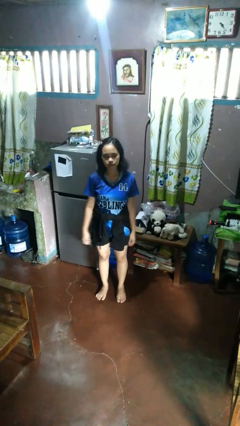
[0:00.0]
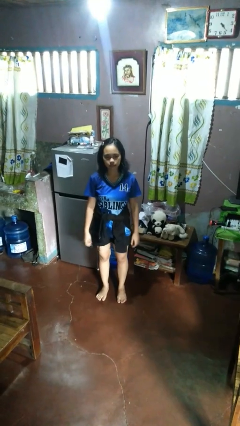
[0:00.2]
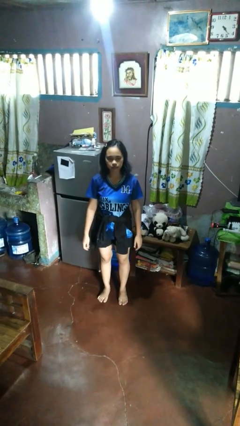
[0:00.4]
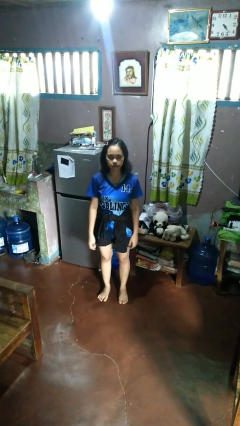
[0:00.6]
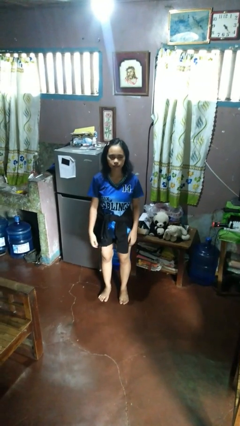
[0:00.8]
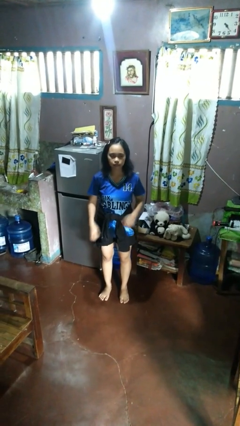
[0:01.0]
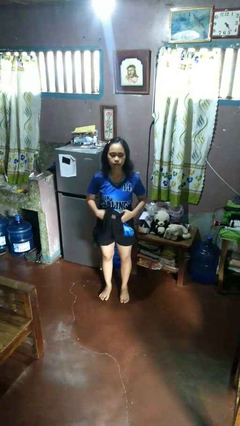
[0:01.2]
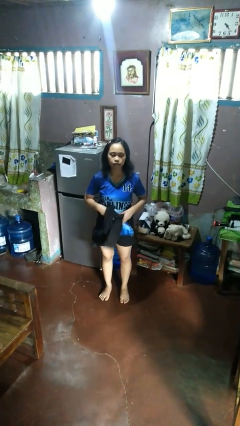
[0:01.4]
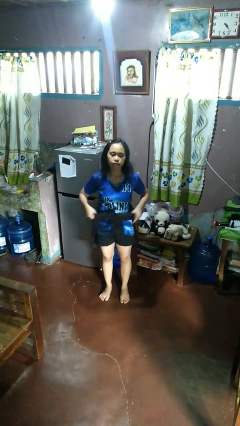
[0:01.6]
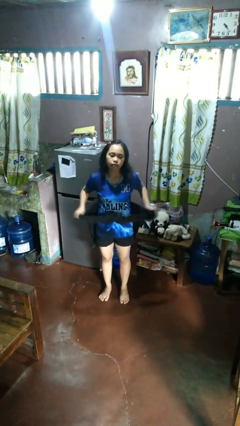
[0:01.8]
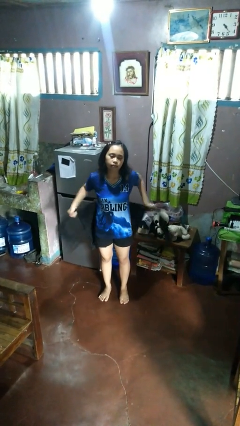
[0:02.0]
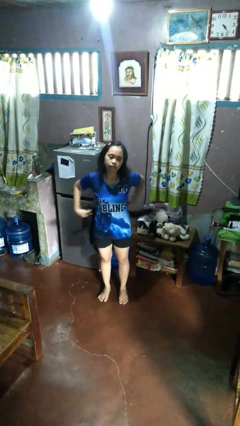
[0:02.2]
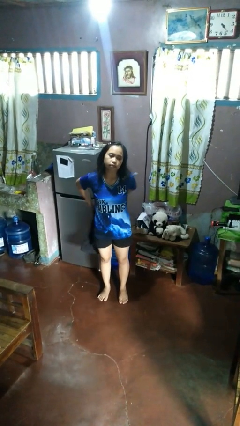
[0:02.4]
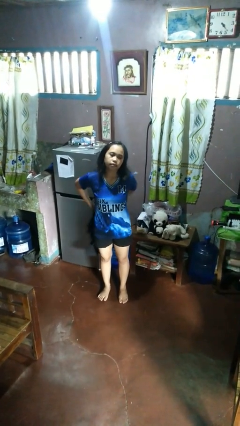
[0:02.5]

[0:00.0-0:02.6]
person unties jacket around waist

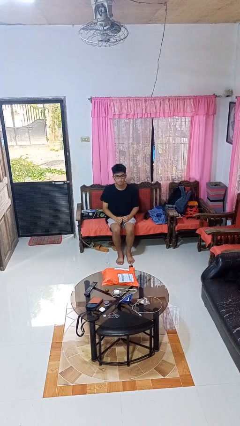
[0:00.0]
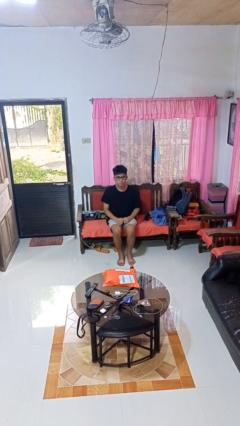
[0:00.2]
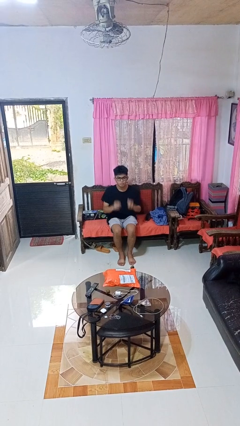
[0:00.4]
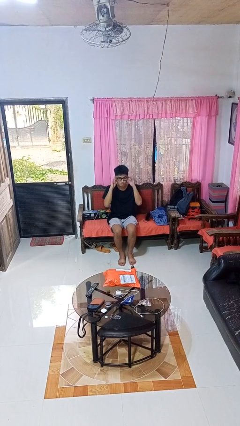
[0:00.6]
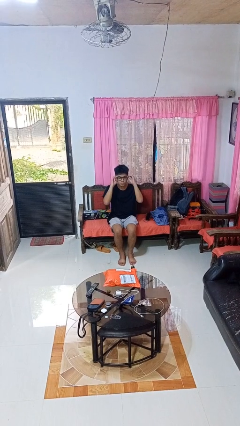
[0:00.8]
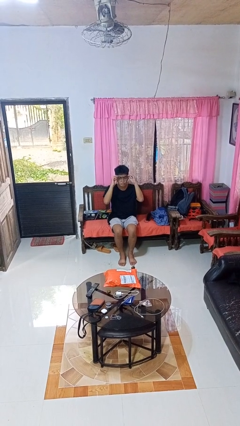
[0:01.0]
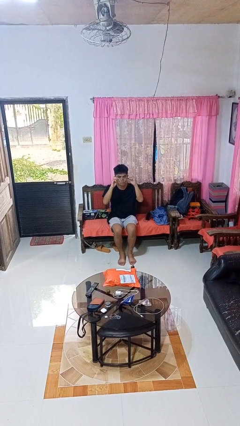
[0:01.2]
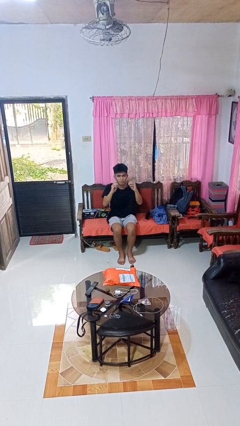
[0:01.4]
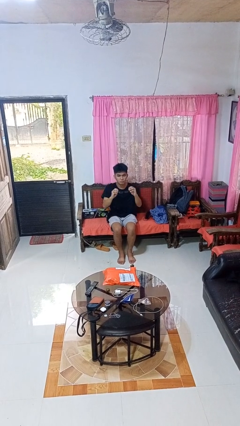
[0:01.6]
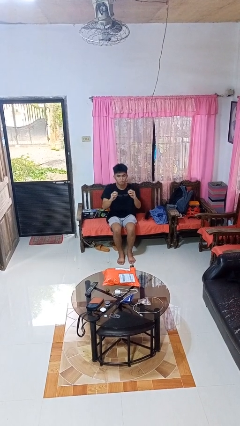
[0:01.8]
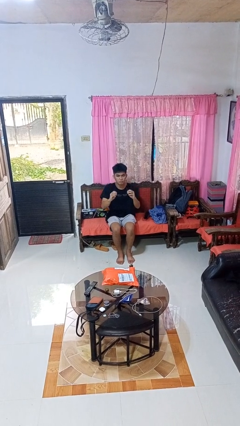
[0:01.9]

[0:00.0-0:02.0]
person takes off glasses

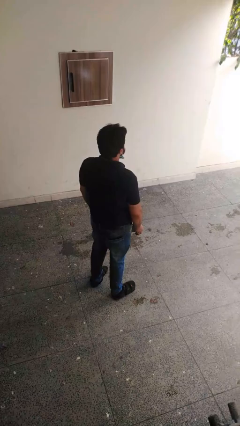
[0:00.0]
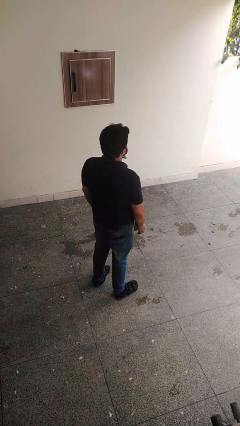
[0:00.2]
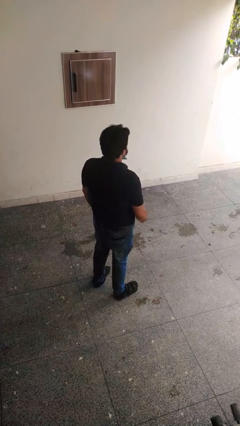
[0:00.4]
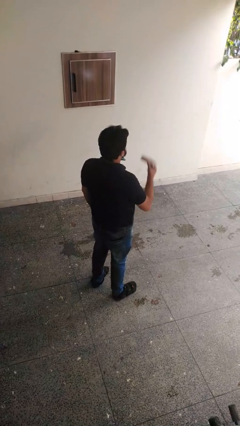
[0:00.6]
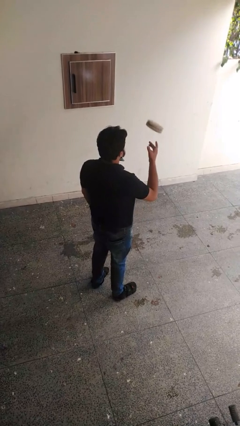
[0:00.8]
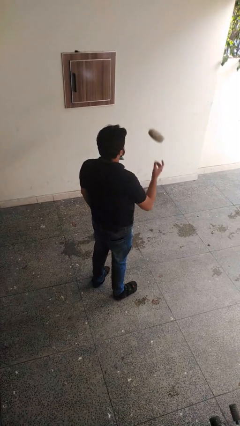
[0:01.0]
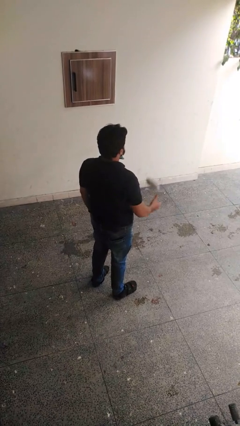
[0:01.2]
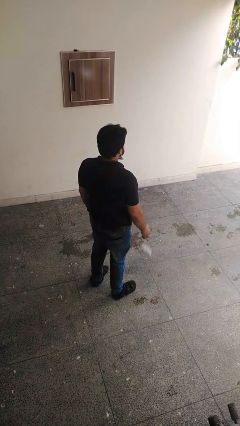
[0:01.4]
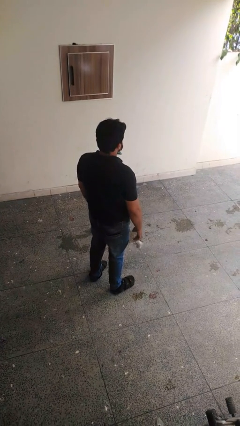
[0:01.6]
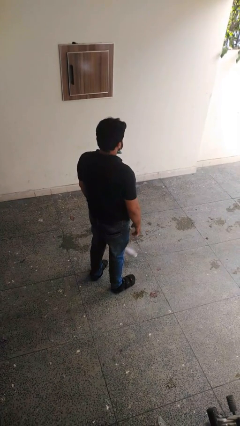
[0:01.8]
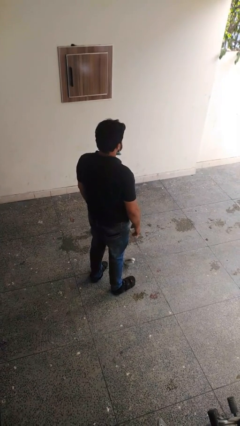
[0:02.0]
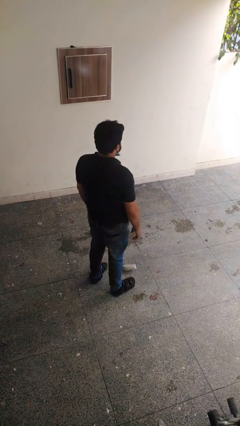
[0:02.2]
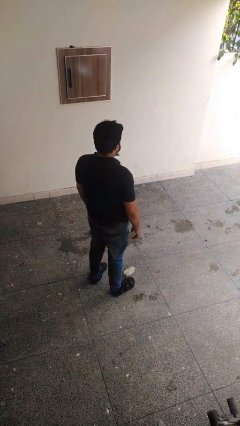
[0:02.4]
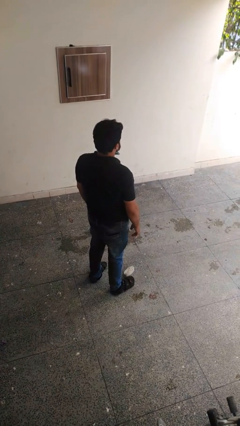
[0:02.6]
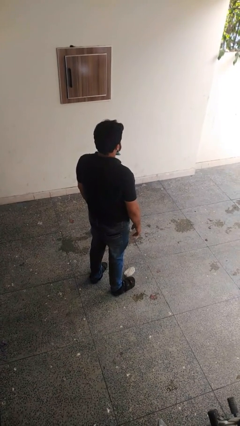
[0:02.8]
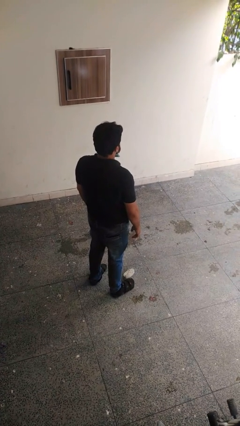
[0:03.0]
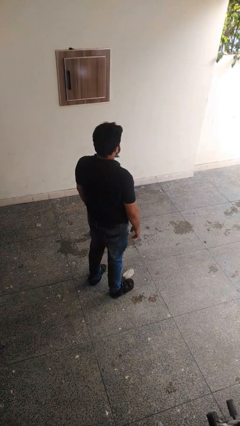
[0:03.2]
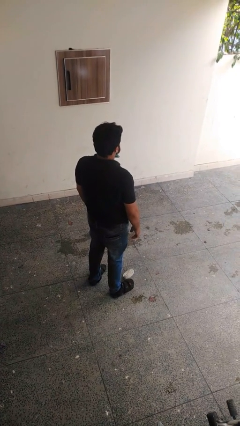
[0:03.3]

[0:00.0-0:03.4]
person throws object into air

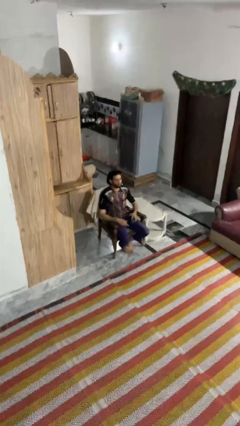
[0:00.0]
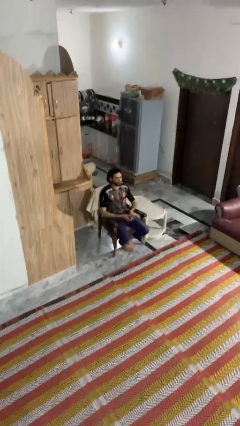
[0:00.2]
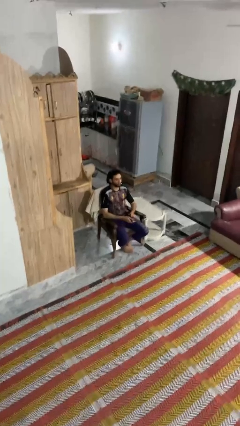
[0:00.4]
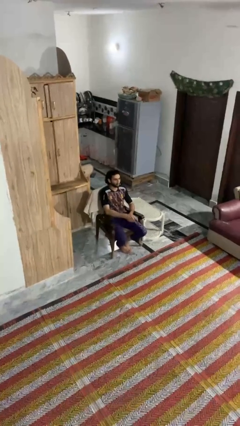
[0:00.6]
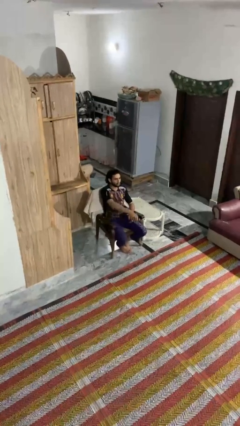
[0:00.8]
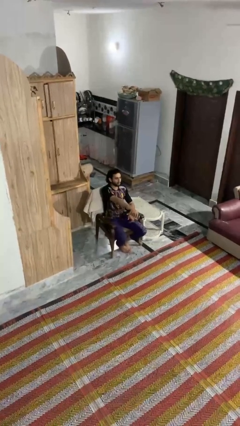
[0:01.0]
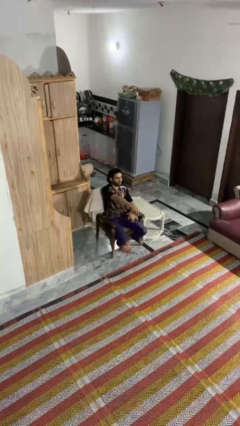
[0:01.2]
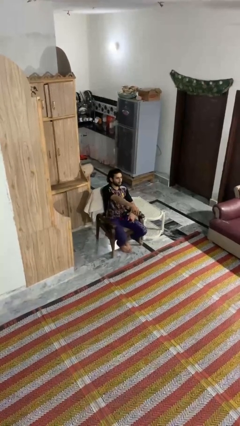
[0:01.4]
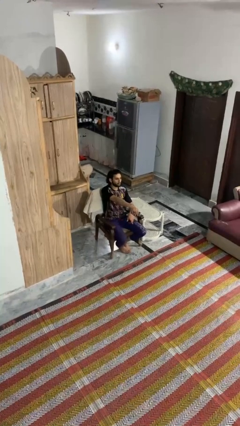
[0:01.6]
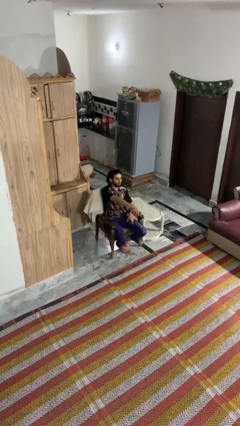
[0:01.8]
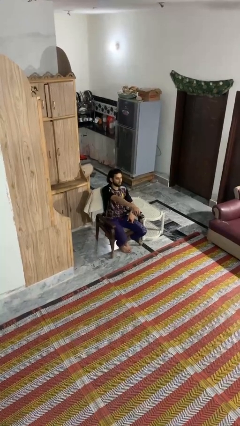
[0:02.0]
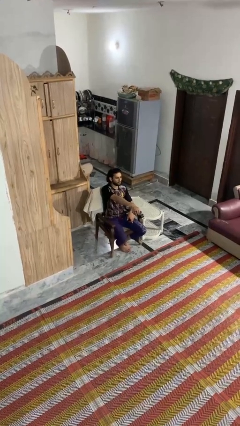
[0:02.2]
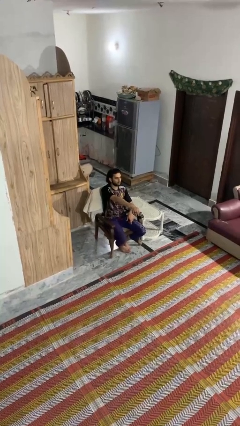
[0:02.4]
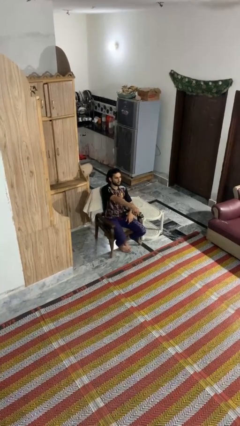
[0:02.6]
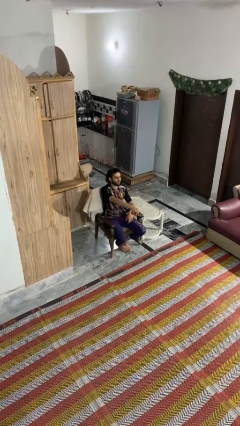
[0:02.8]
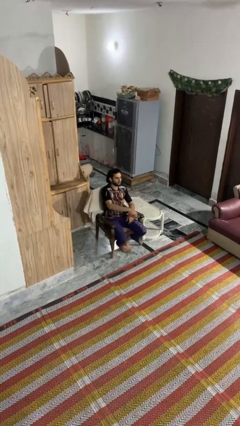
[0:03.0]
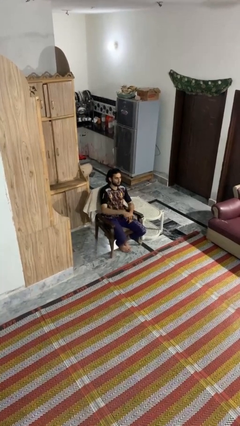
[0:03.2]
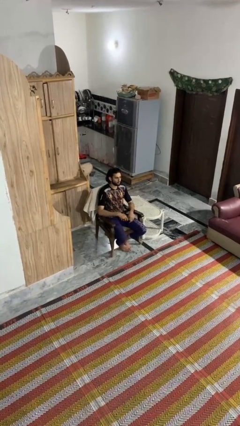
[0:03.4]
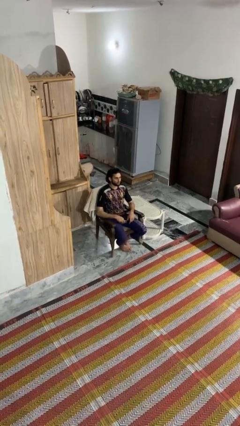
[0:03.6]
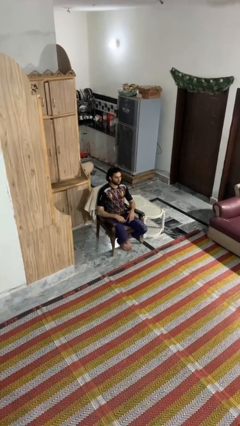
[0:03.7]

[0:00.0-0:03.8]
person uses television remote

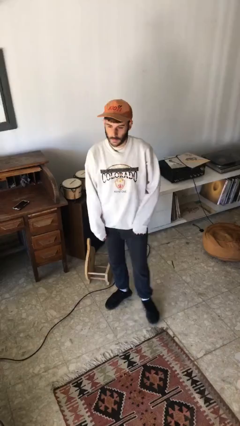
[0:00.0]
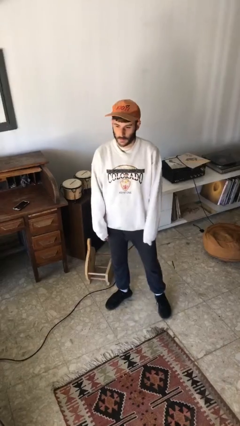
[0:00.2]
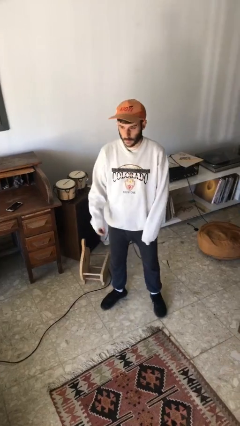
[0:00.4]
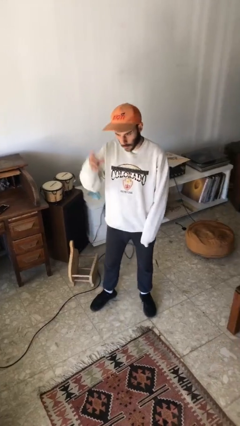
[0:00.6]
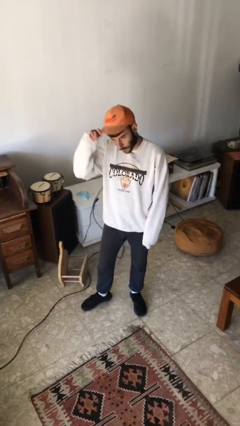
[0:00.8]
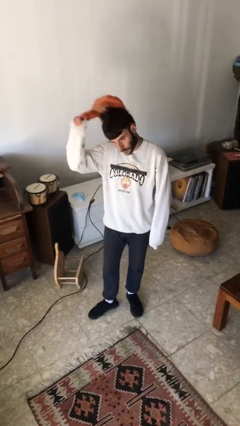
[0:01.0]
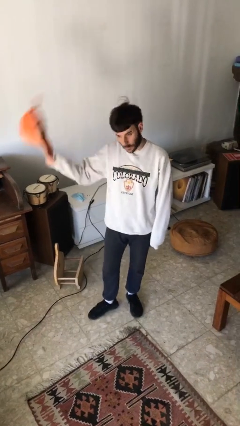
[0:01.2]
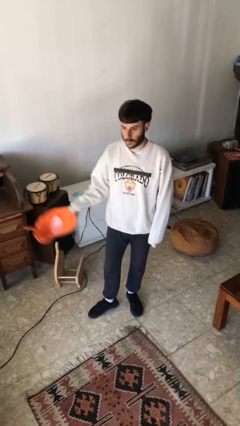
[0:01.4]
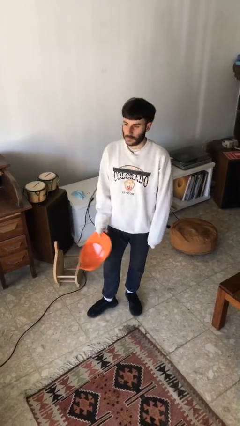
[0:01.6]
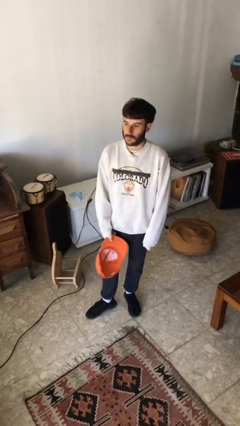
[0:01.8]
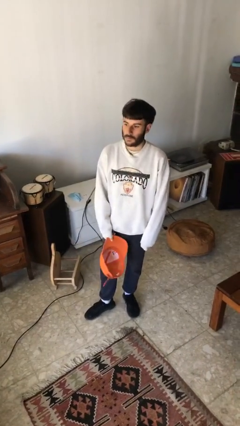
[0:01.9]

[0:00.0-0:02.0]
person takes off hat

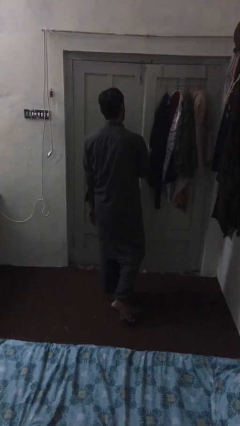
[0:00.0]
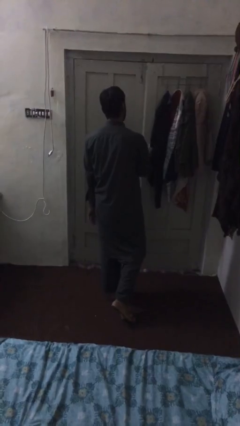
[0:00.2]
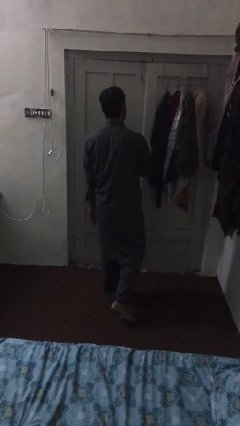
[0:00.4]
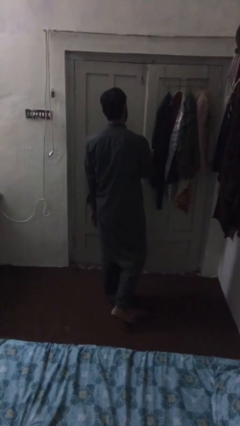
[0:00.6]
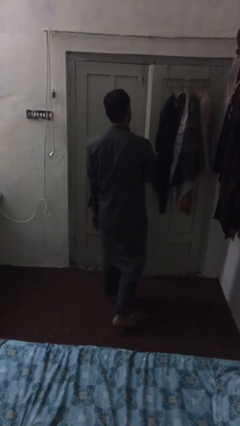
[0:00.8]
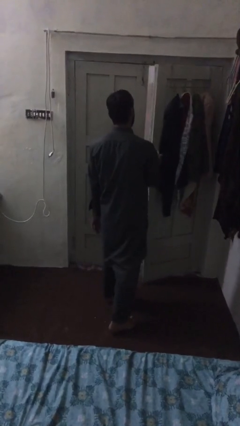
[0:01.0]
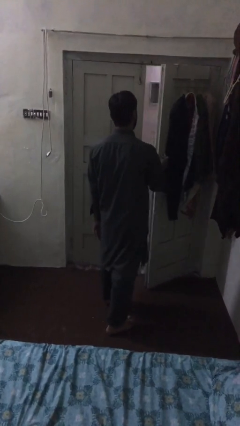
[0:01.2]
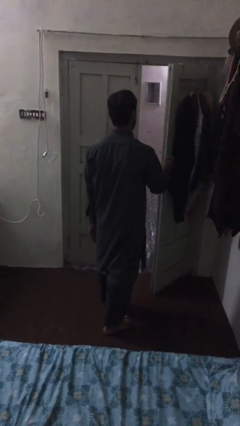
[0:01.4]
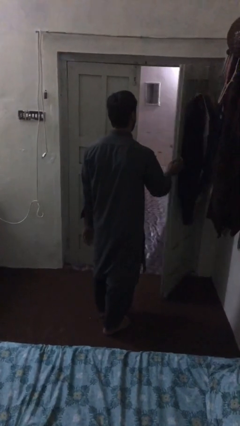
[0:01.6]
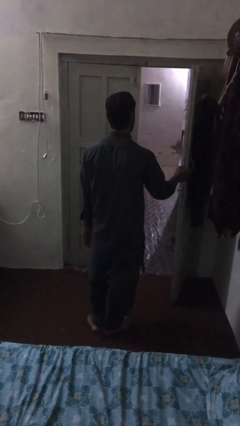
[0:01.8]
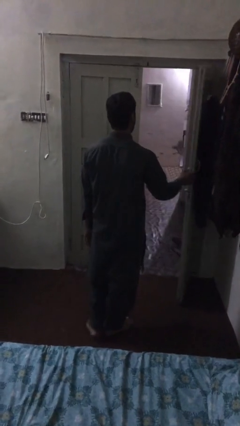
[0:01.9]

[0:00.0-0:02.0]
person opens facility door

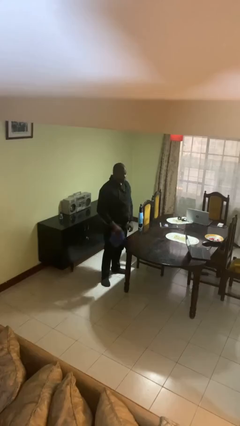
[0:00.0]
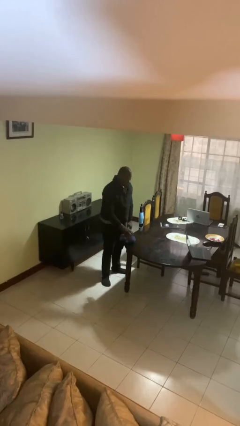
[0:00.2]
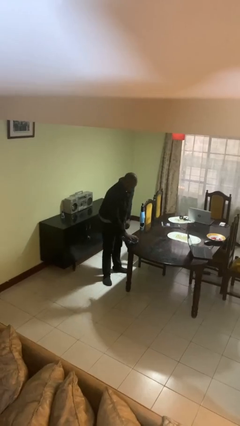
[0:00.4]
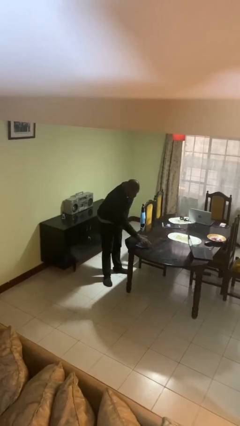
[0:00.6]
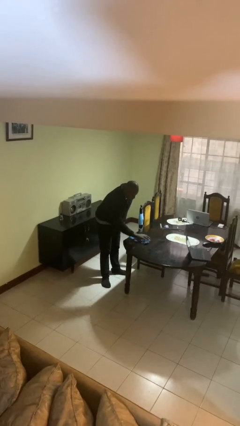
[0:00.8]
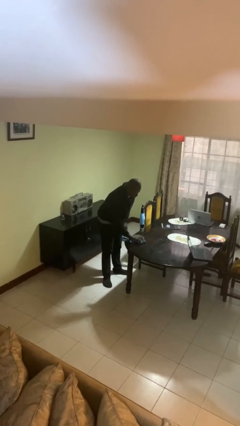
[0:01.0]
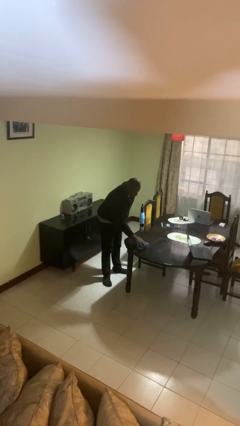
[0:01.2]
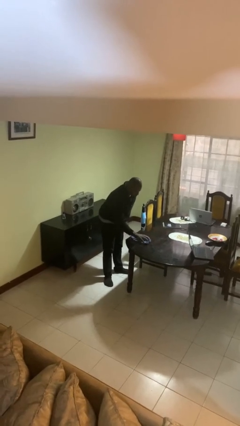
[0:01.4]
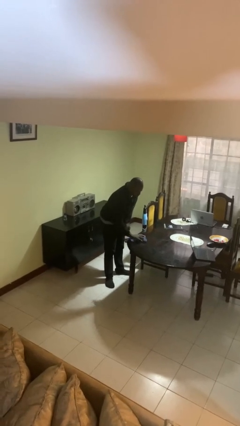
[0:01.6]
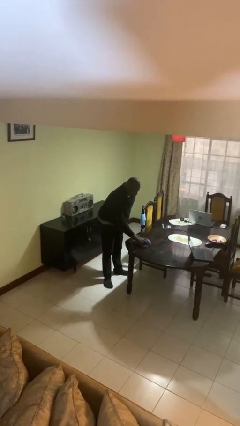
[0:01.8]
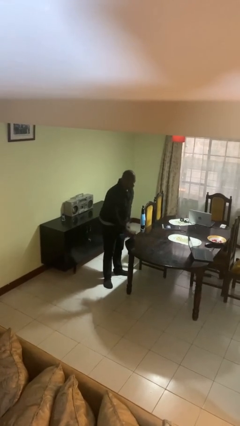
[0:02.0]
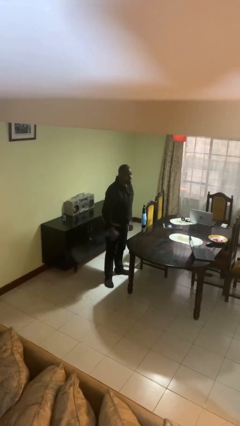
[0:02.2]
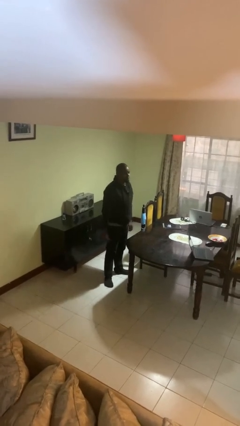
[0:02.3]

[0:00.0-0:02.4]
person cleans table with rag
